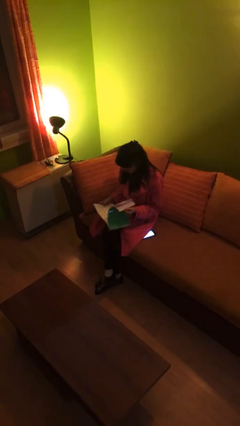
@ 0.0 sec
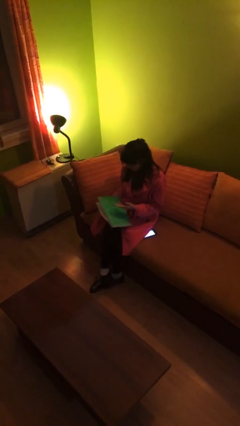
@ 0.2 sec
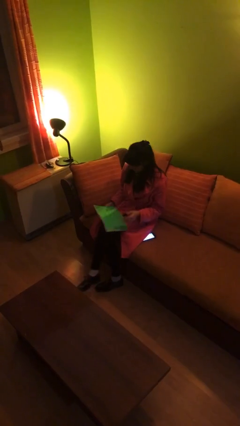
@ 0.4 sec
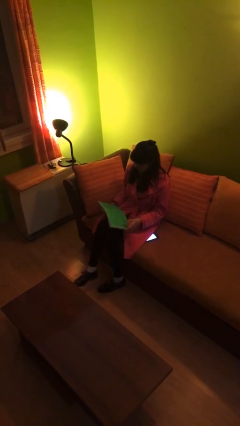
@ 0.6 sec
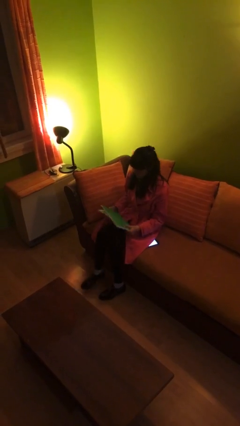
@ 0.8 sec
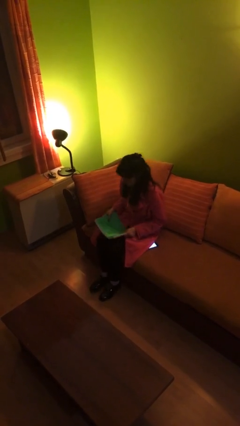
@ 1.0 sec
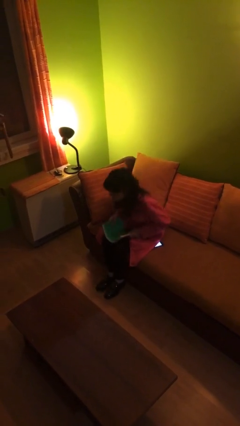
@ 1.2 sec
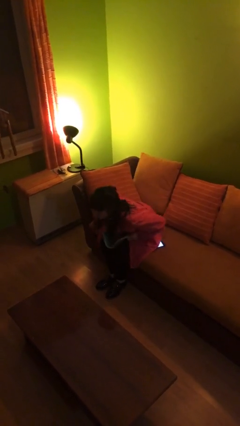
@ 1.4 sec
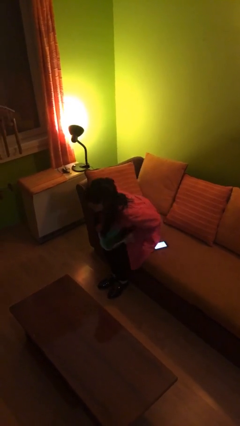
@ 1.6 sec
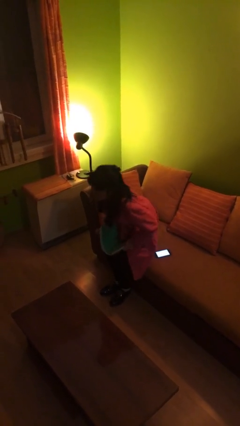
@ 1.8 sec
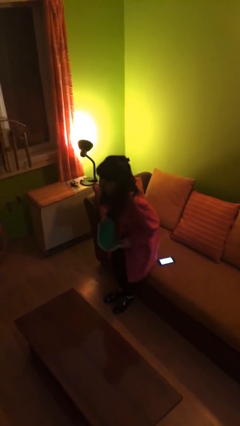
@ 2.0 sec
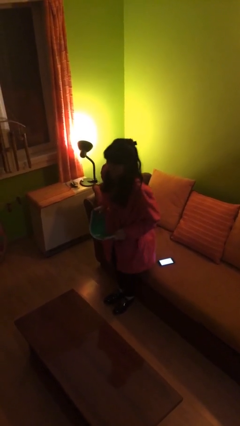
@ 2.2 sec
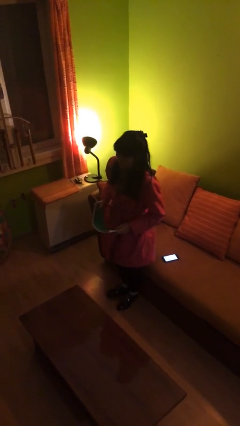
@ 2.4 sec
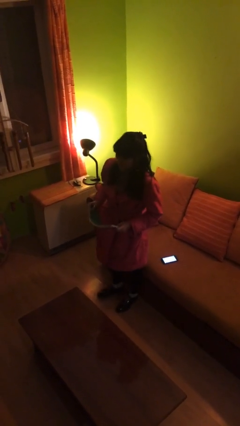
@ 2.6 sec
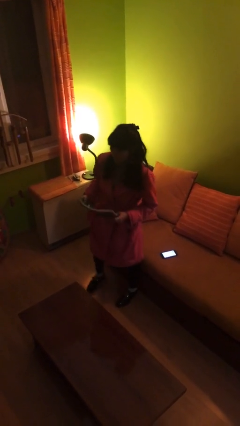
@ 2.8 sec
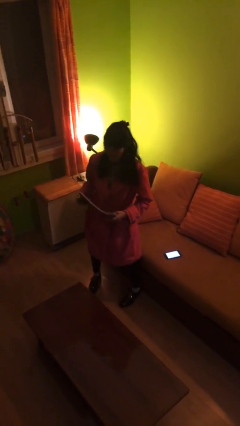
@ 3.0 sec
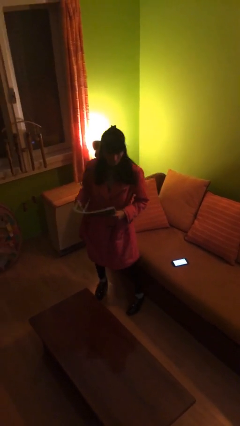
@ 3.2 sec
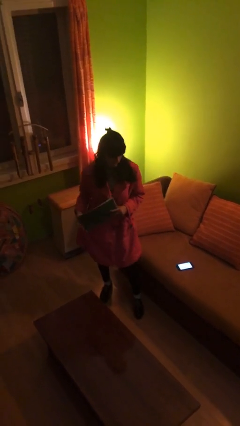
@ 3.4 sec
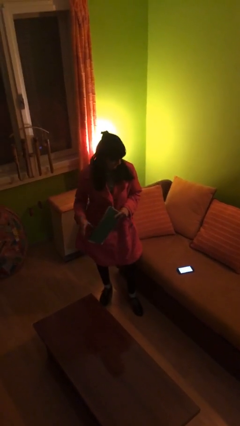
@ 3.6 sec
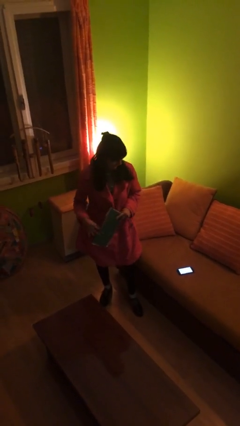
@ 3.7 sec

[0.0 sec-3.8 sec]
person stands up

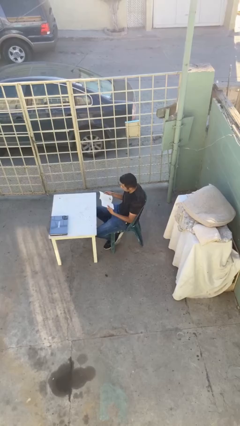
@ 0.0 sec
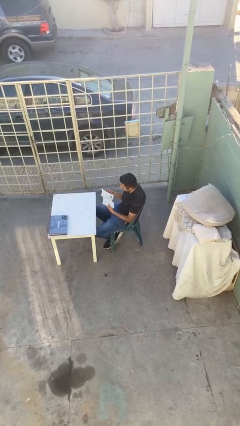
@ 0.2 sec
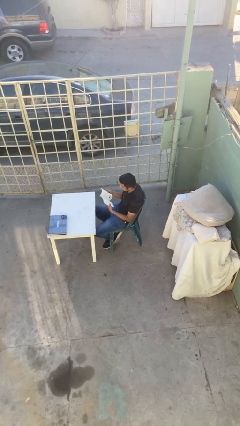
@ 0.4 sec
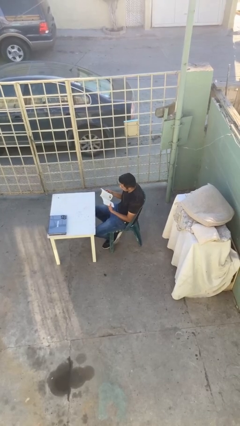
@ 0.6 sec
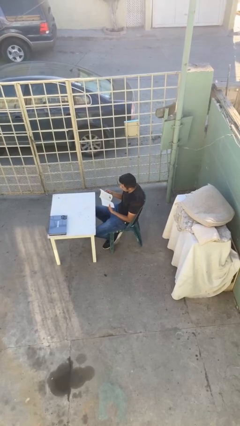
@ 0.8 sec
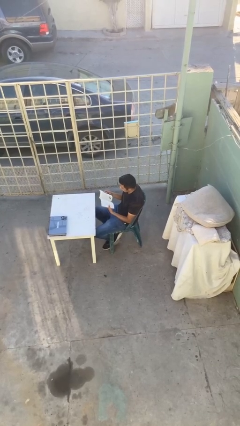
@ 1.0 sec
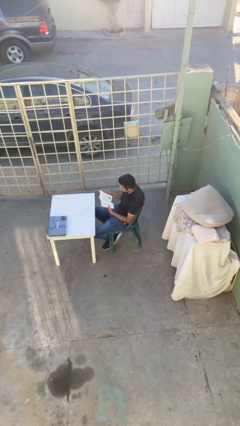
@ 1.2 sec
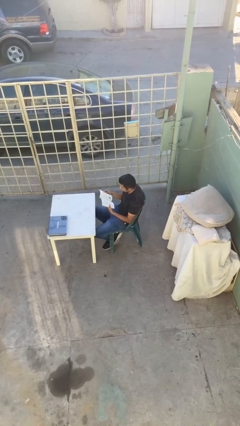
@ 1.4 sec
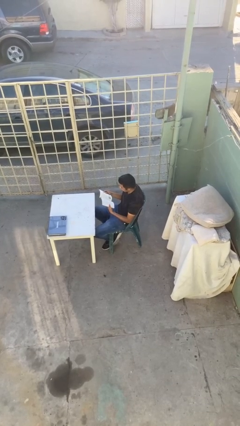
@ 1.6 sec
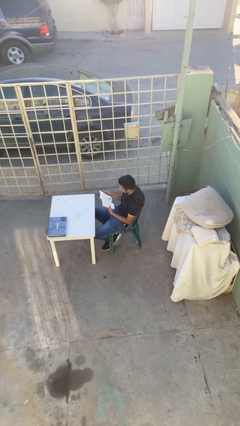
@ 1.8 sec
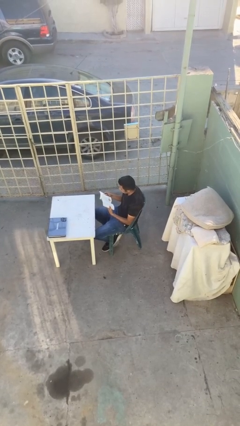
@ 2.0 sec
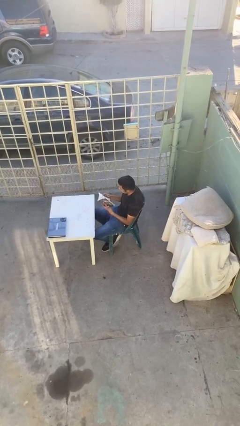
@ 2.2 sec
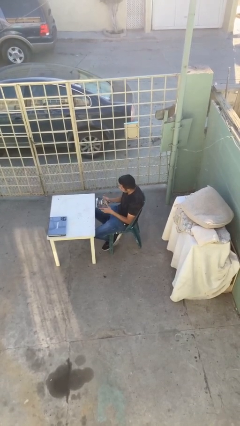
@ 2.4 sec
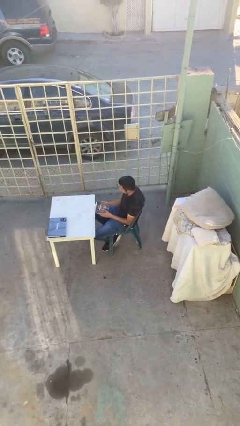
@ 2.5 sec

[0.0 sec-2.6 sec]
person reads document

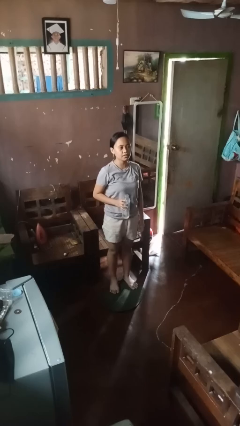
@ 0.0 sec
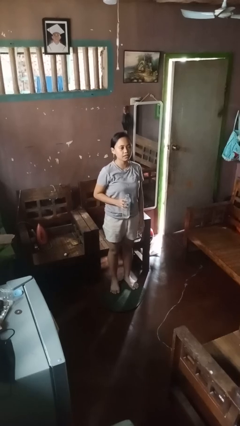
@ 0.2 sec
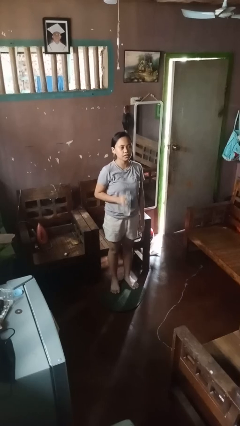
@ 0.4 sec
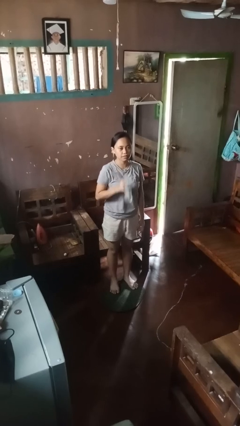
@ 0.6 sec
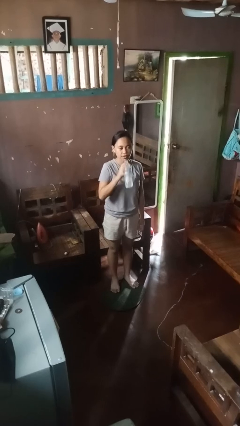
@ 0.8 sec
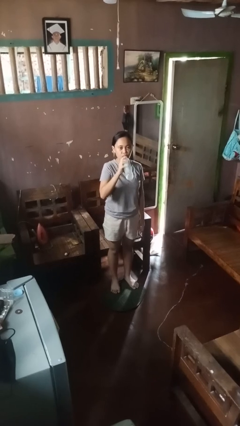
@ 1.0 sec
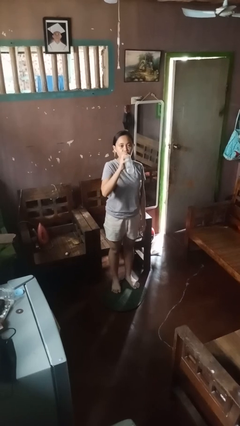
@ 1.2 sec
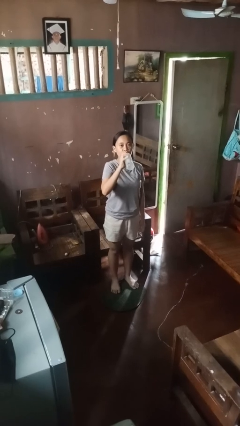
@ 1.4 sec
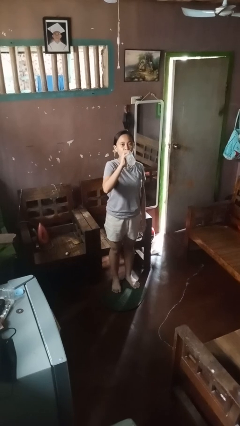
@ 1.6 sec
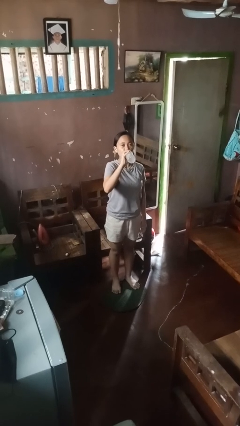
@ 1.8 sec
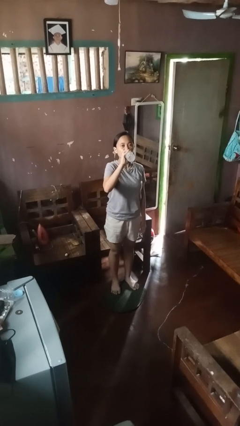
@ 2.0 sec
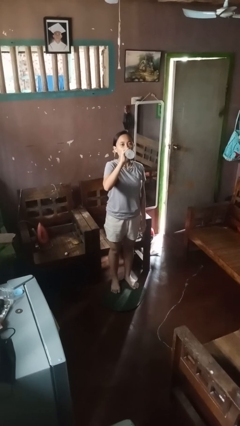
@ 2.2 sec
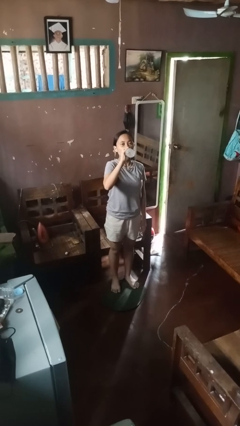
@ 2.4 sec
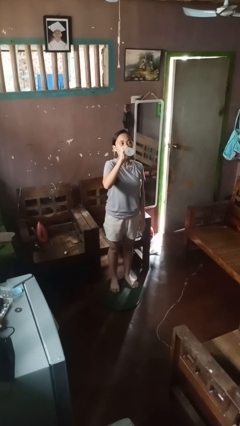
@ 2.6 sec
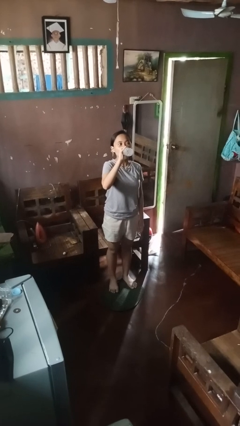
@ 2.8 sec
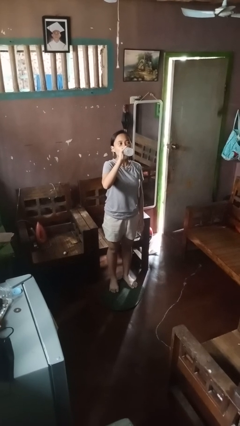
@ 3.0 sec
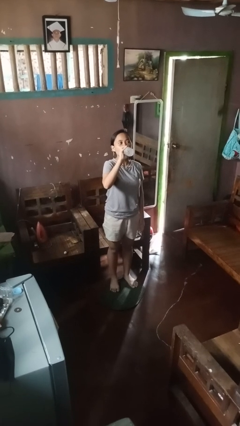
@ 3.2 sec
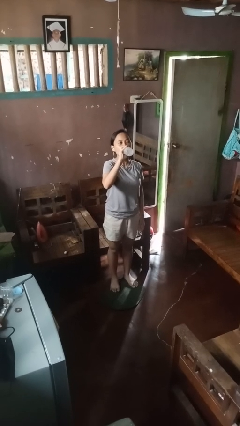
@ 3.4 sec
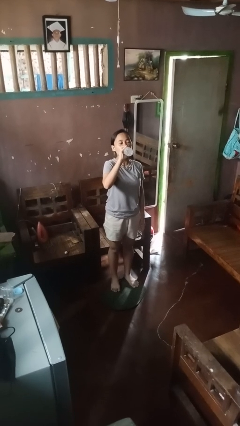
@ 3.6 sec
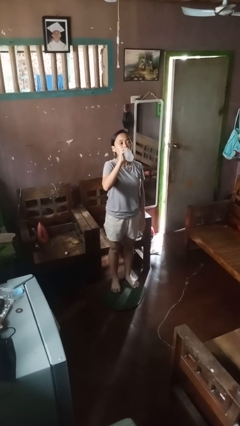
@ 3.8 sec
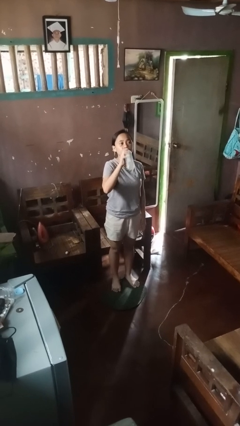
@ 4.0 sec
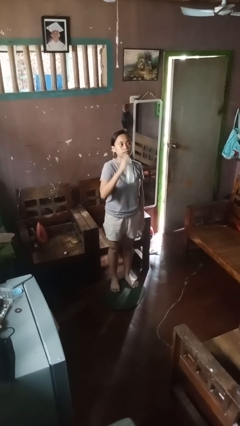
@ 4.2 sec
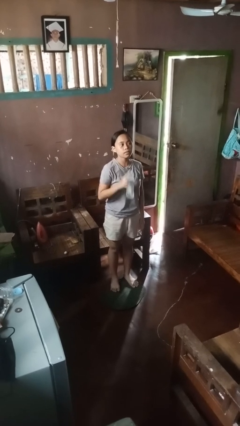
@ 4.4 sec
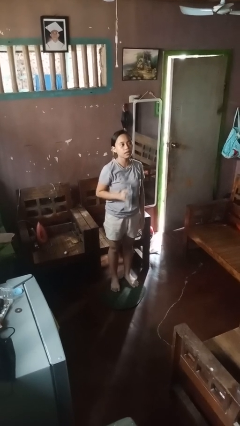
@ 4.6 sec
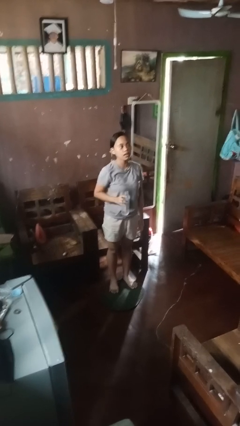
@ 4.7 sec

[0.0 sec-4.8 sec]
person drinks from bottle

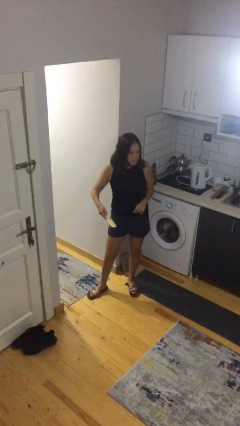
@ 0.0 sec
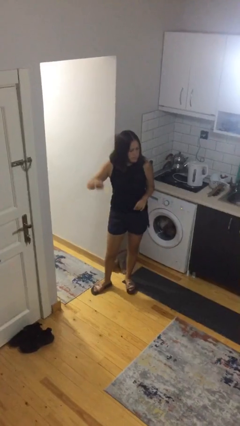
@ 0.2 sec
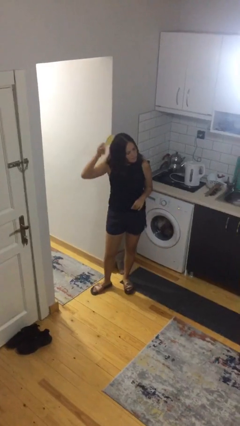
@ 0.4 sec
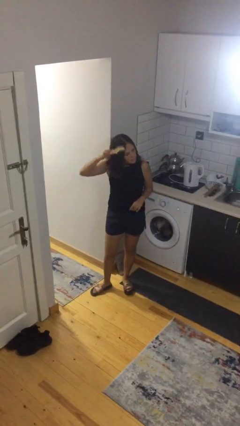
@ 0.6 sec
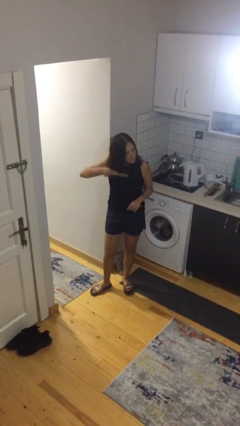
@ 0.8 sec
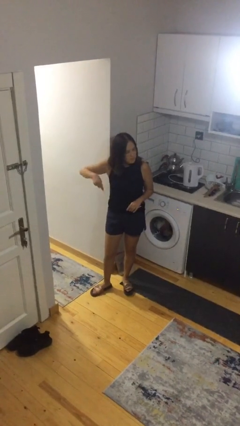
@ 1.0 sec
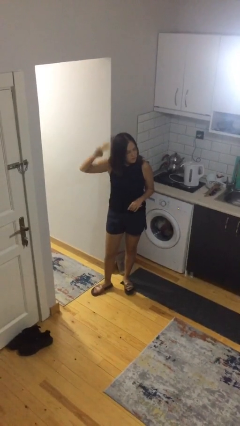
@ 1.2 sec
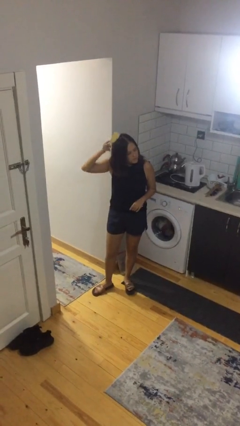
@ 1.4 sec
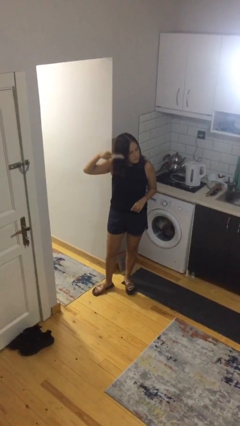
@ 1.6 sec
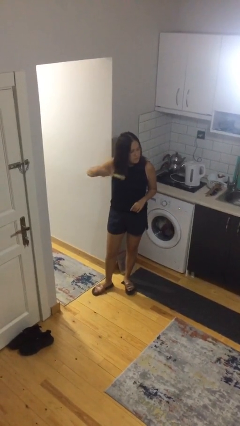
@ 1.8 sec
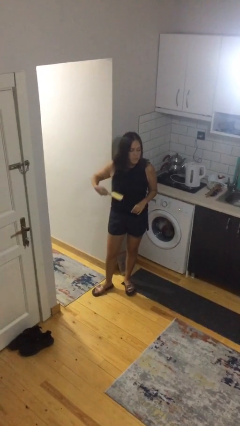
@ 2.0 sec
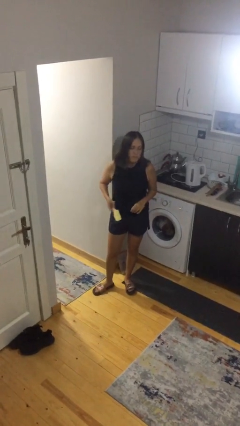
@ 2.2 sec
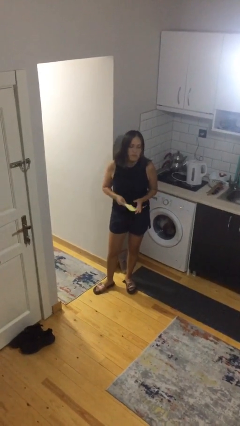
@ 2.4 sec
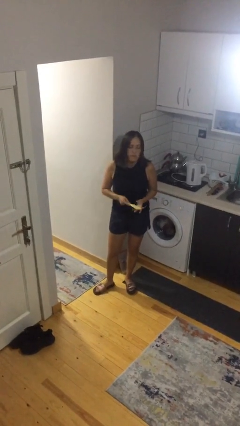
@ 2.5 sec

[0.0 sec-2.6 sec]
person brushes hair

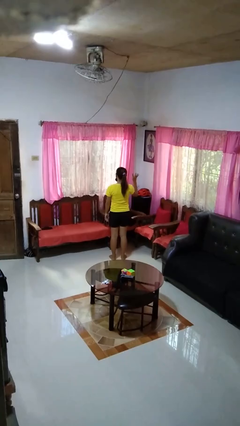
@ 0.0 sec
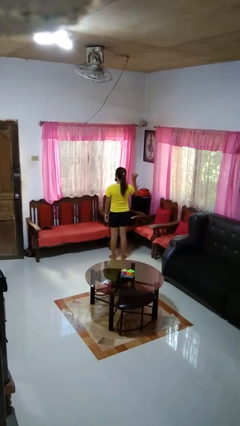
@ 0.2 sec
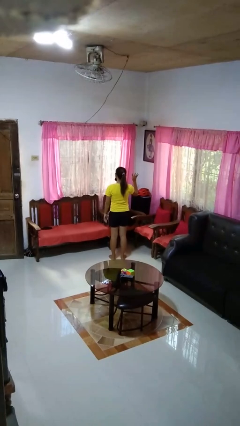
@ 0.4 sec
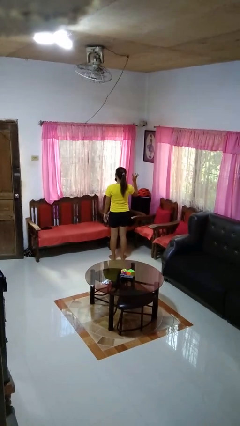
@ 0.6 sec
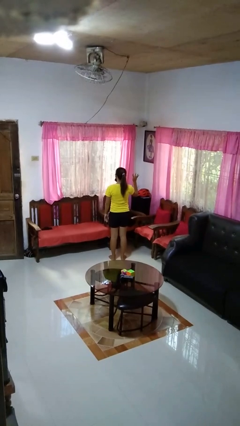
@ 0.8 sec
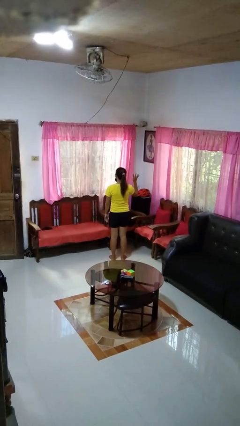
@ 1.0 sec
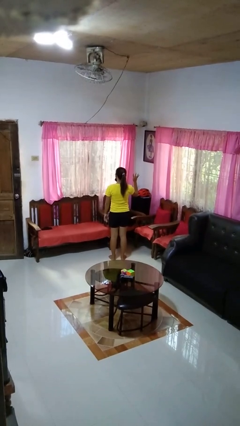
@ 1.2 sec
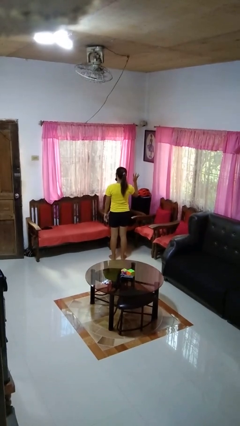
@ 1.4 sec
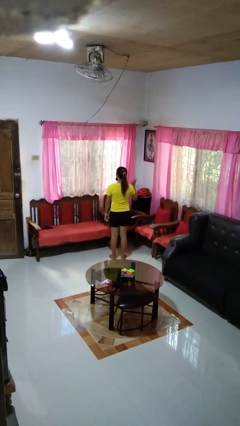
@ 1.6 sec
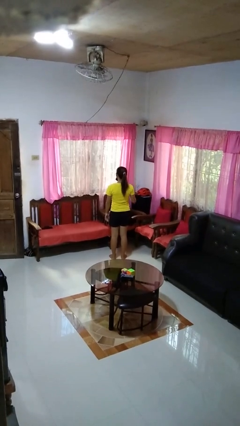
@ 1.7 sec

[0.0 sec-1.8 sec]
person gestures number four

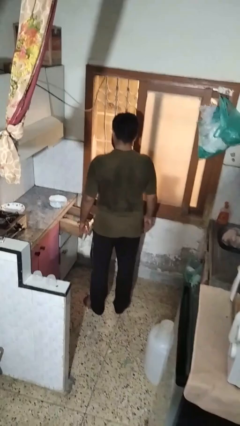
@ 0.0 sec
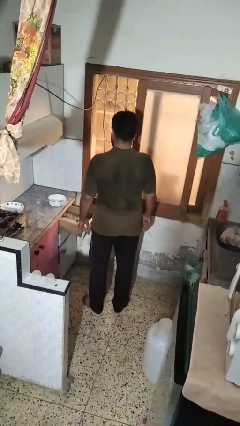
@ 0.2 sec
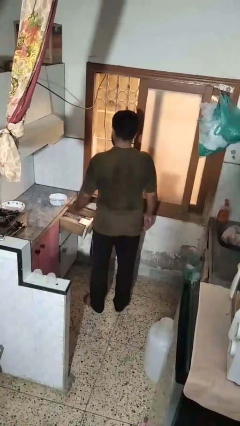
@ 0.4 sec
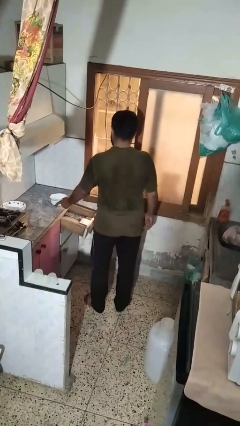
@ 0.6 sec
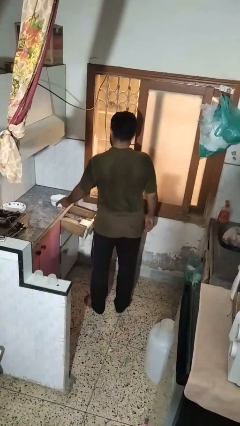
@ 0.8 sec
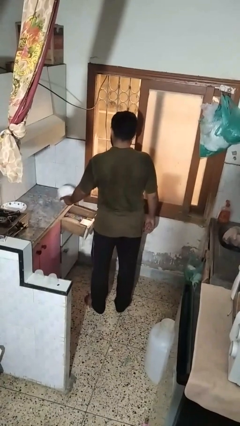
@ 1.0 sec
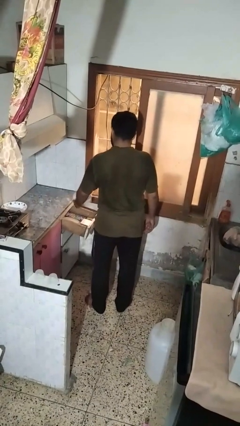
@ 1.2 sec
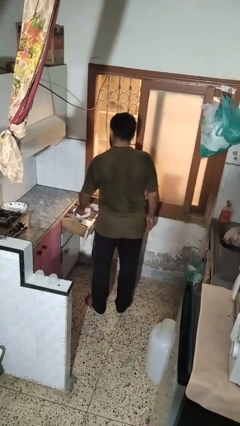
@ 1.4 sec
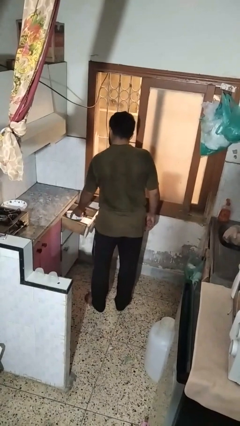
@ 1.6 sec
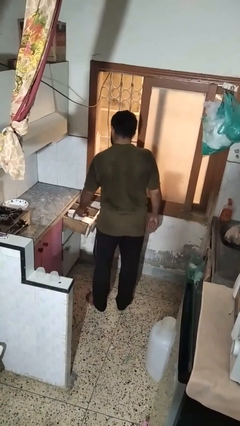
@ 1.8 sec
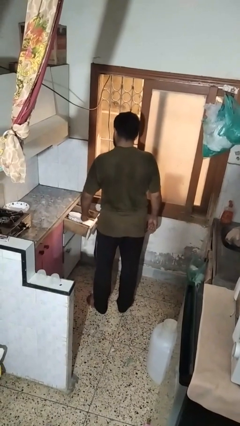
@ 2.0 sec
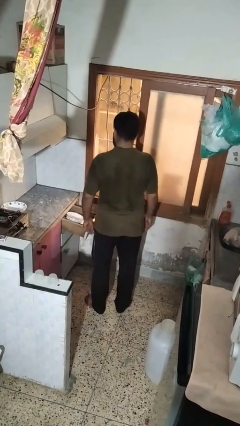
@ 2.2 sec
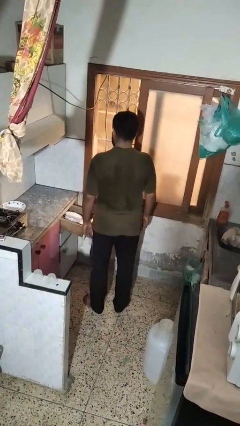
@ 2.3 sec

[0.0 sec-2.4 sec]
person puts object into kitchen drawer
